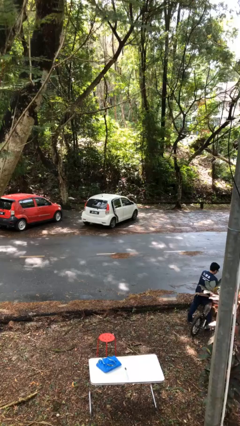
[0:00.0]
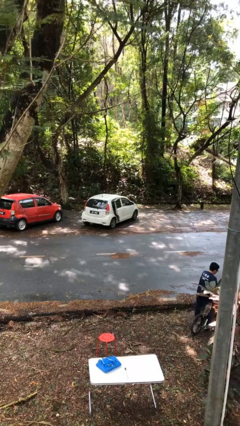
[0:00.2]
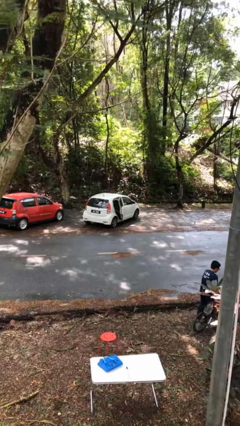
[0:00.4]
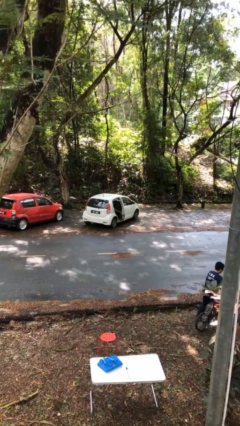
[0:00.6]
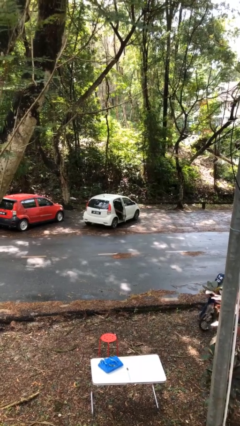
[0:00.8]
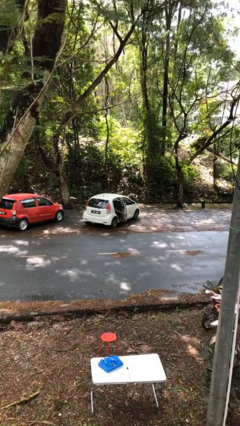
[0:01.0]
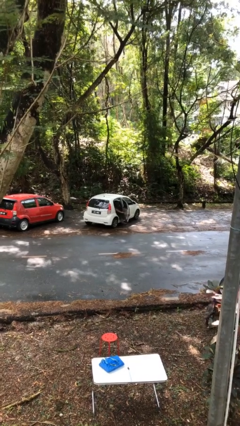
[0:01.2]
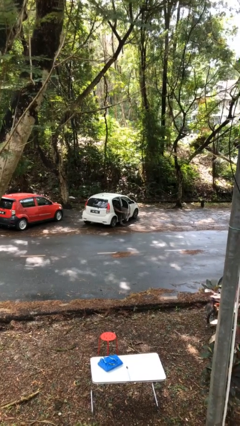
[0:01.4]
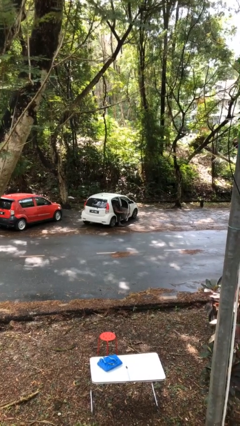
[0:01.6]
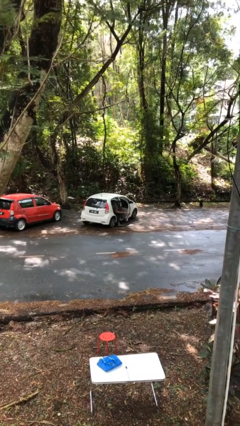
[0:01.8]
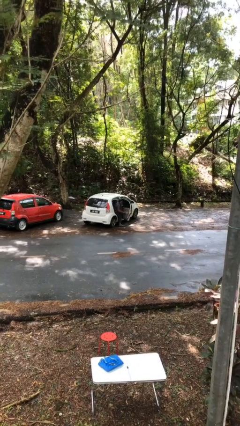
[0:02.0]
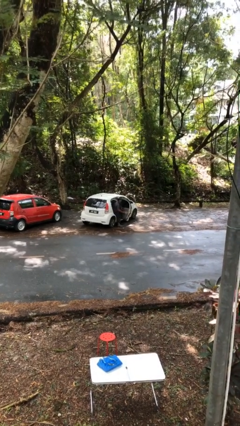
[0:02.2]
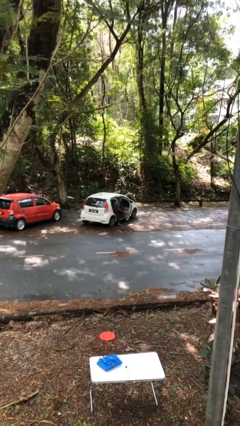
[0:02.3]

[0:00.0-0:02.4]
person opens car door

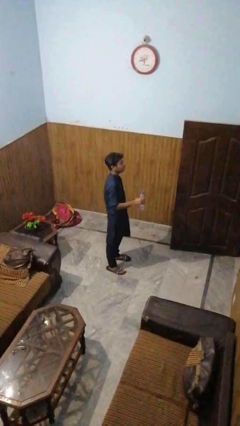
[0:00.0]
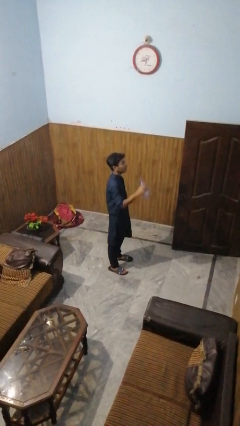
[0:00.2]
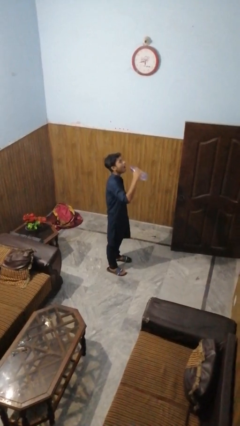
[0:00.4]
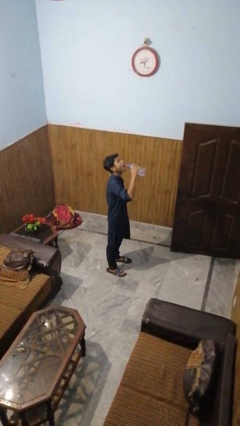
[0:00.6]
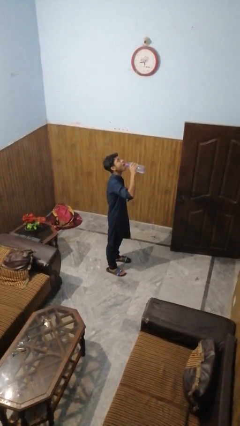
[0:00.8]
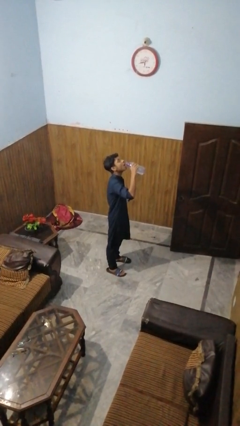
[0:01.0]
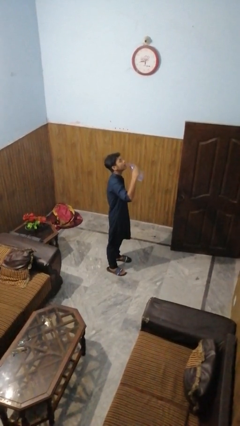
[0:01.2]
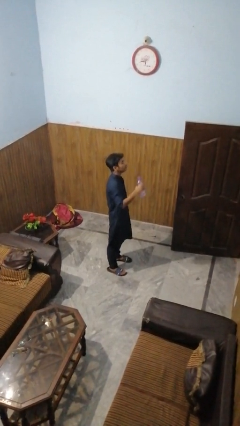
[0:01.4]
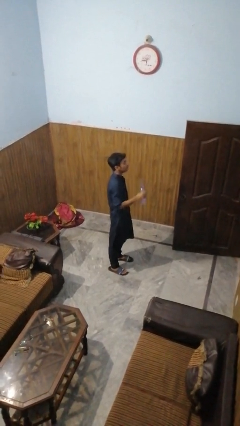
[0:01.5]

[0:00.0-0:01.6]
person drinks from bottle

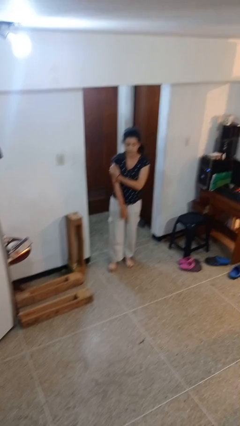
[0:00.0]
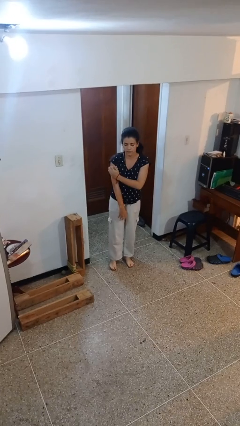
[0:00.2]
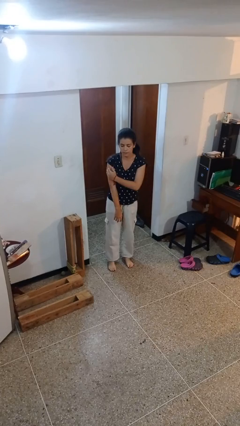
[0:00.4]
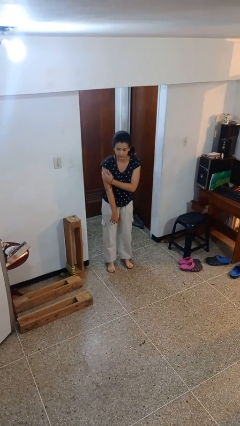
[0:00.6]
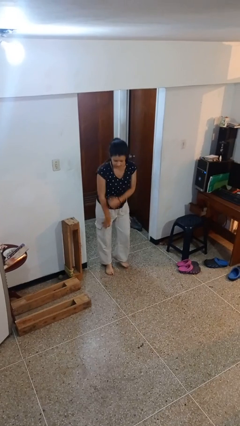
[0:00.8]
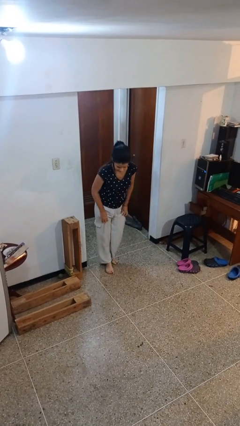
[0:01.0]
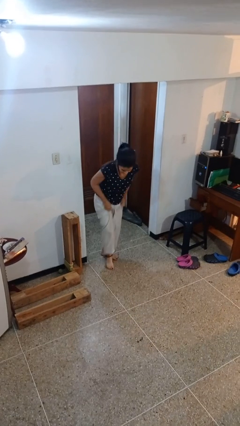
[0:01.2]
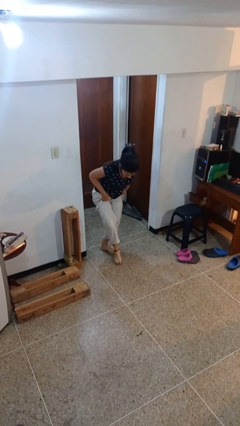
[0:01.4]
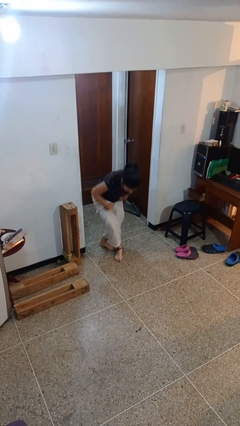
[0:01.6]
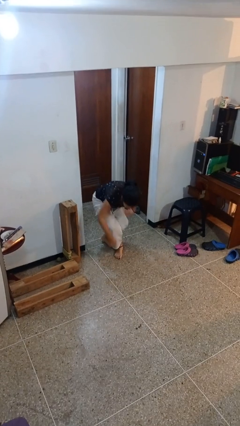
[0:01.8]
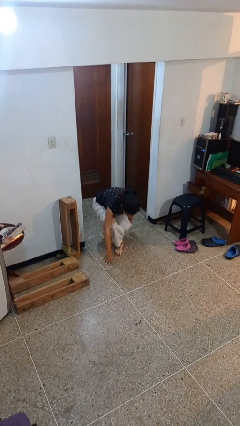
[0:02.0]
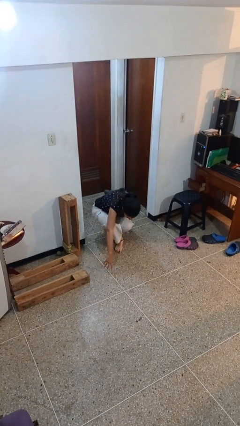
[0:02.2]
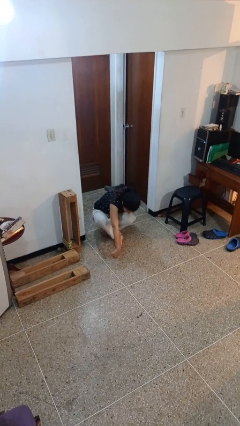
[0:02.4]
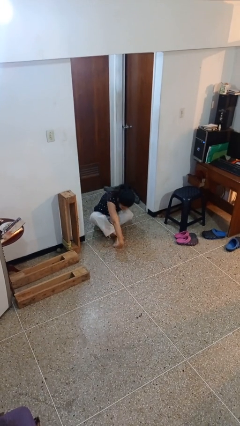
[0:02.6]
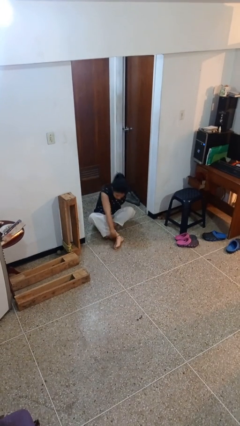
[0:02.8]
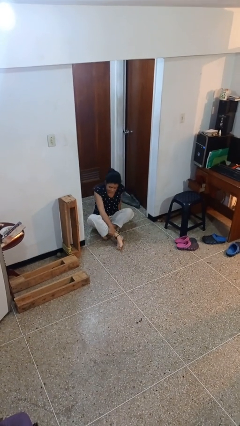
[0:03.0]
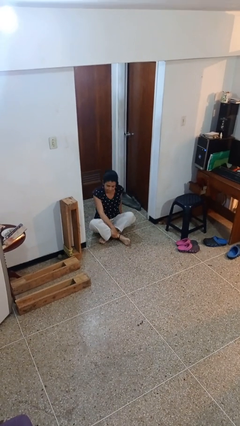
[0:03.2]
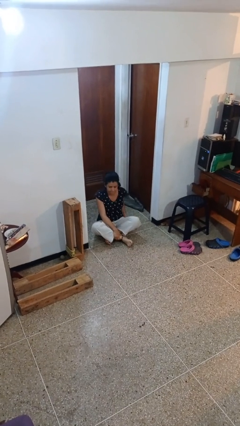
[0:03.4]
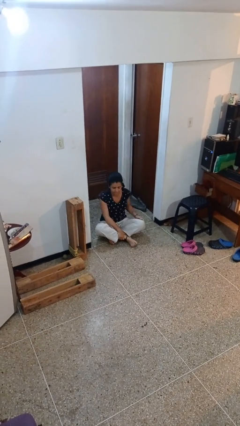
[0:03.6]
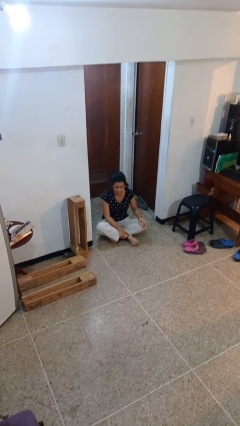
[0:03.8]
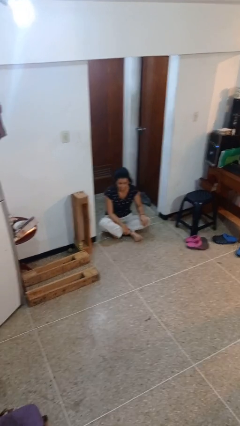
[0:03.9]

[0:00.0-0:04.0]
person sits crisscross

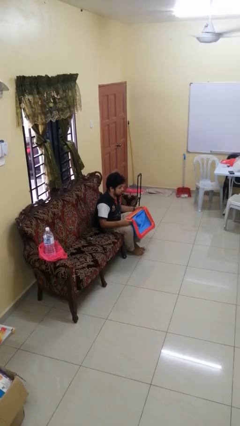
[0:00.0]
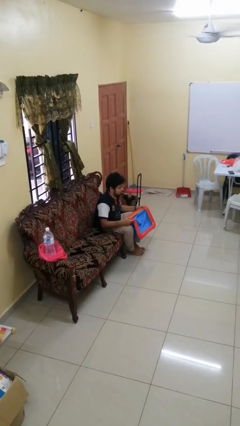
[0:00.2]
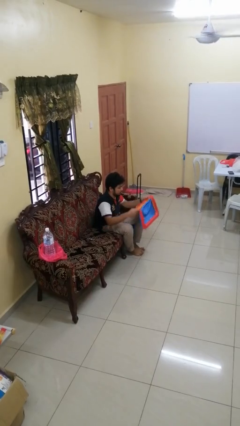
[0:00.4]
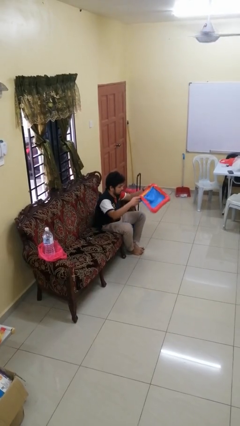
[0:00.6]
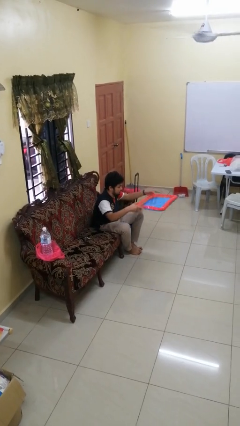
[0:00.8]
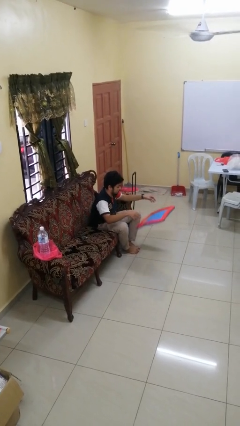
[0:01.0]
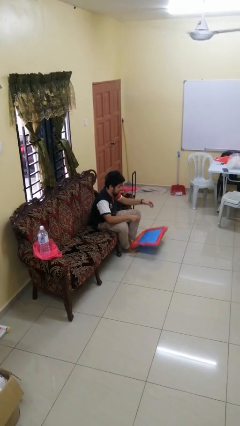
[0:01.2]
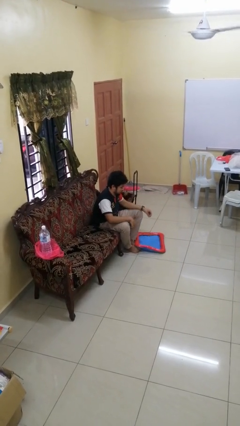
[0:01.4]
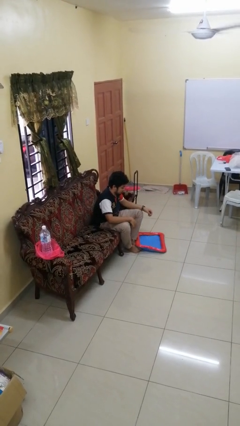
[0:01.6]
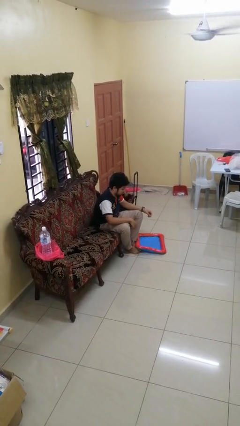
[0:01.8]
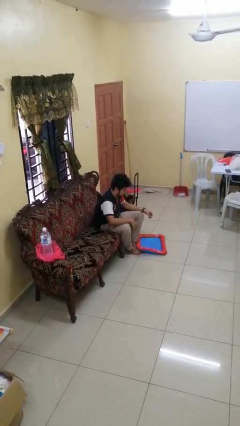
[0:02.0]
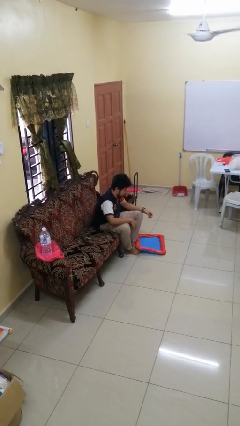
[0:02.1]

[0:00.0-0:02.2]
person drops object

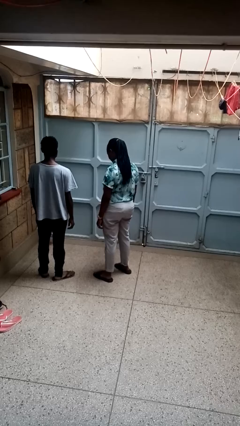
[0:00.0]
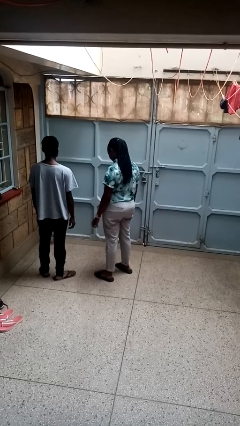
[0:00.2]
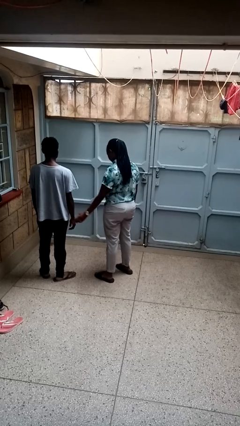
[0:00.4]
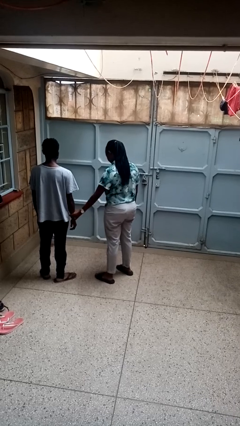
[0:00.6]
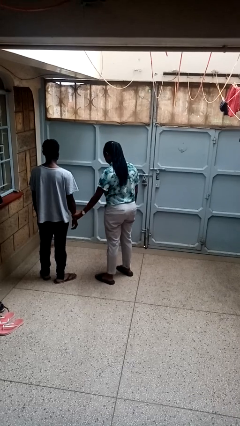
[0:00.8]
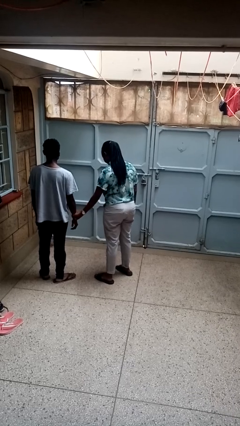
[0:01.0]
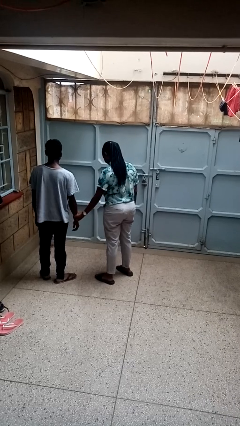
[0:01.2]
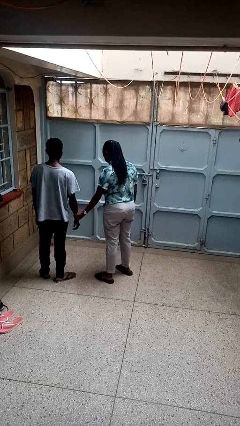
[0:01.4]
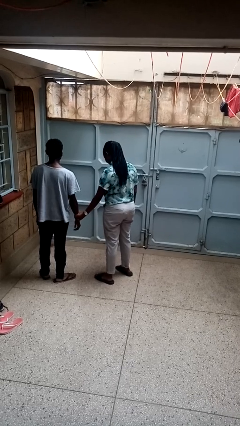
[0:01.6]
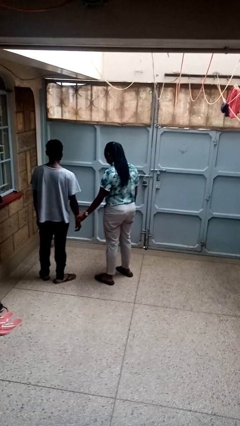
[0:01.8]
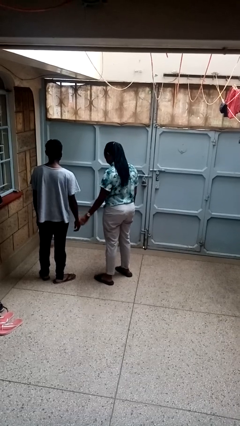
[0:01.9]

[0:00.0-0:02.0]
person grabs person by forearm

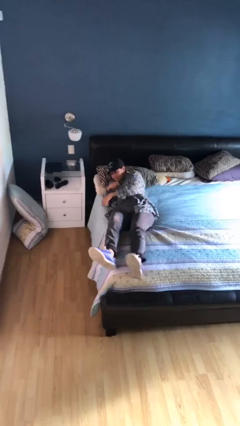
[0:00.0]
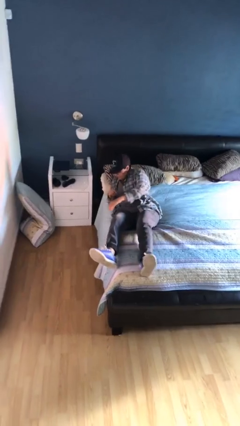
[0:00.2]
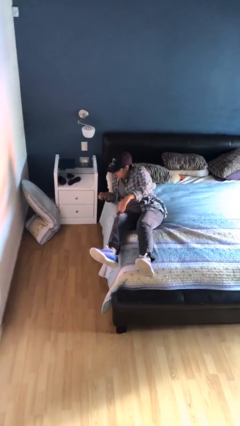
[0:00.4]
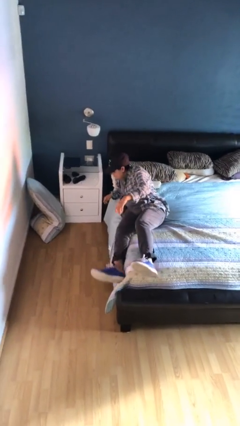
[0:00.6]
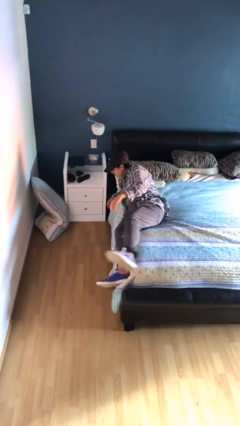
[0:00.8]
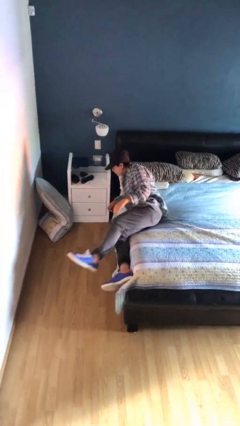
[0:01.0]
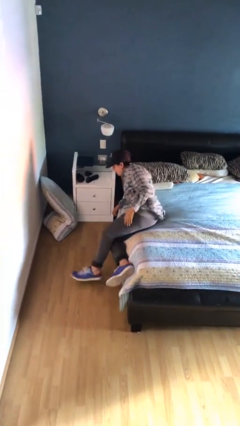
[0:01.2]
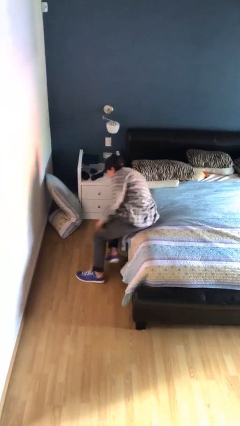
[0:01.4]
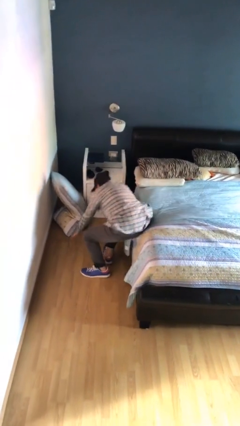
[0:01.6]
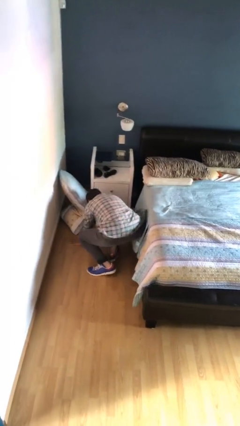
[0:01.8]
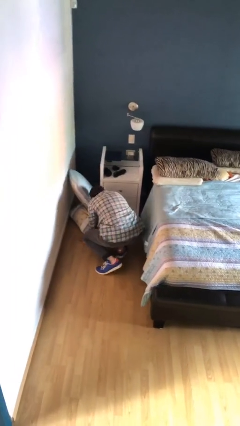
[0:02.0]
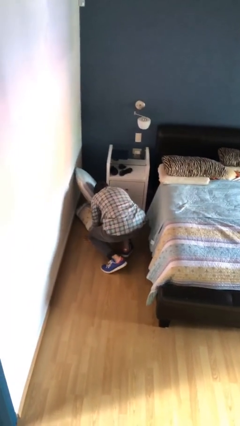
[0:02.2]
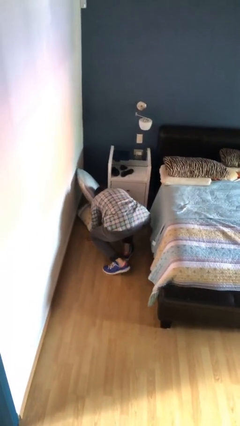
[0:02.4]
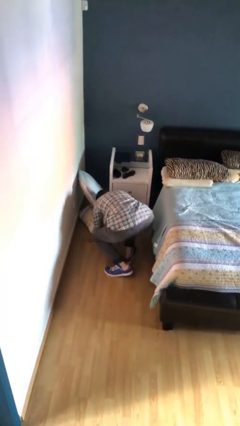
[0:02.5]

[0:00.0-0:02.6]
person falls from bed

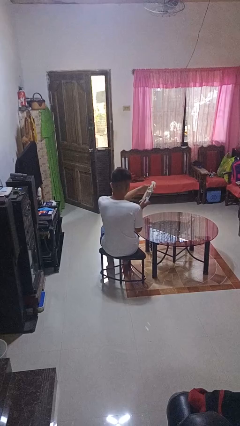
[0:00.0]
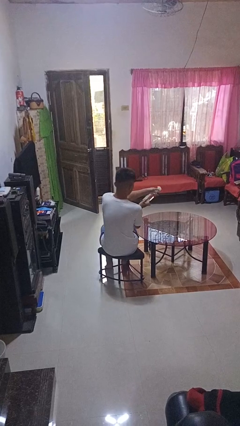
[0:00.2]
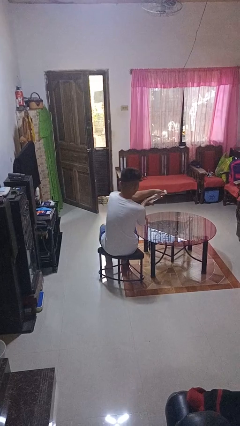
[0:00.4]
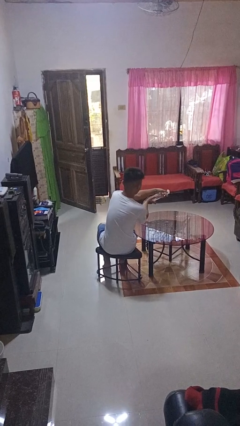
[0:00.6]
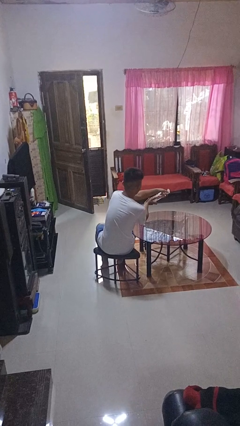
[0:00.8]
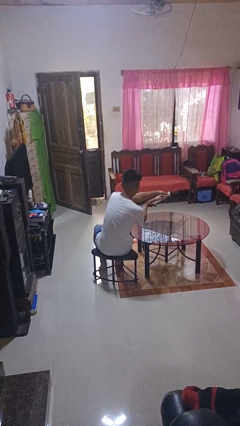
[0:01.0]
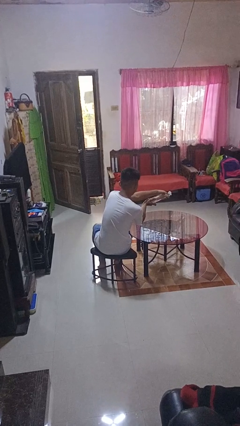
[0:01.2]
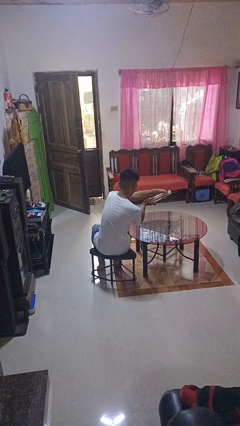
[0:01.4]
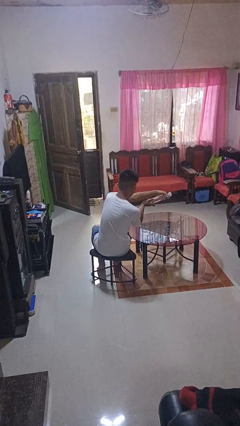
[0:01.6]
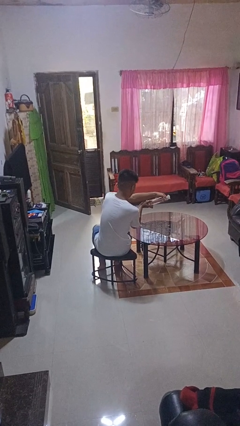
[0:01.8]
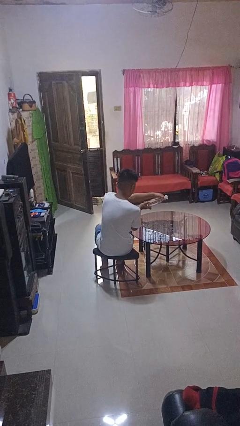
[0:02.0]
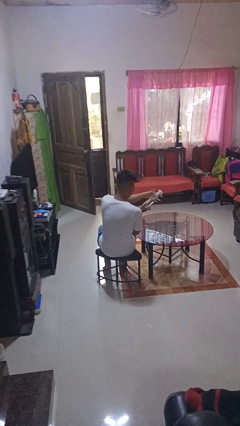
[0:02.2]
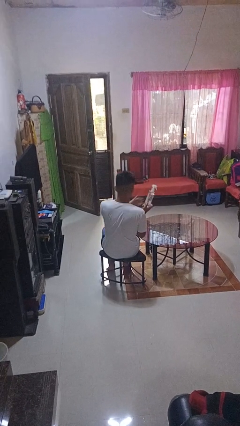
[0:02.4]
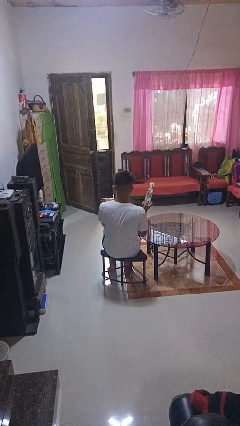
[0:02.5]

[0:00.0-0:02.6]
person sprays from bottle
